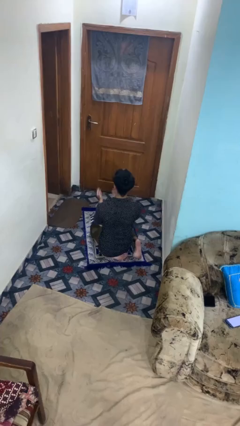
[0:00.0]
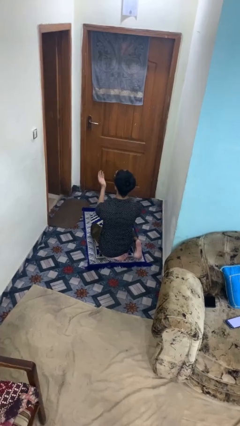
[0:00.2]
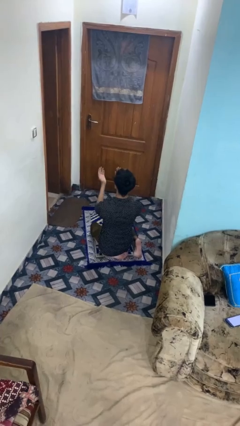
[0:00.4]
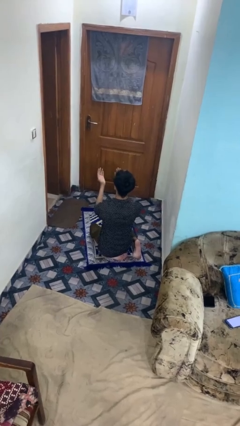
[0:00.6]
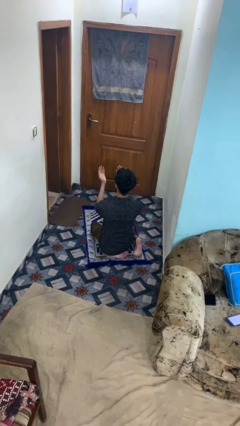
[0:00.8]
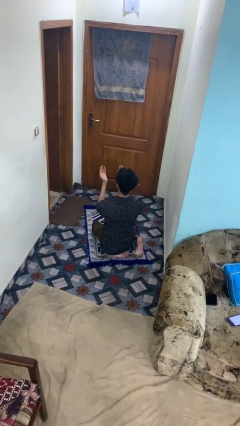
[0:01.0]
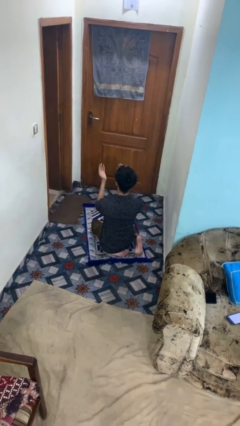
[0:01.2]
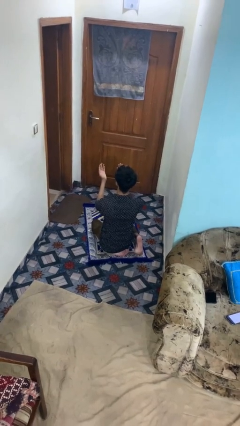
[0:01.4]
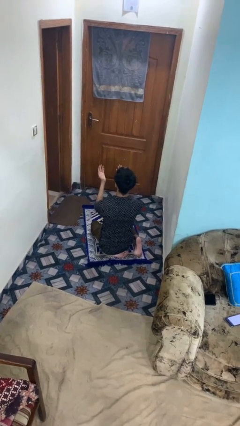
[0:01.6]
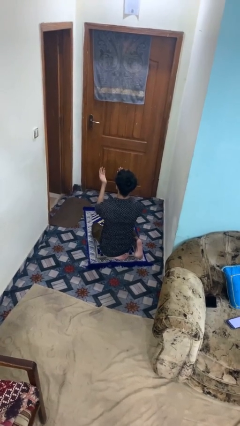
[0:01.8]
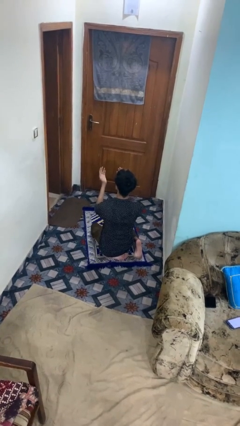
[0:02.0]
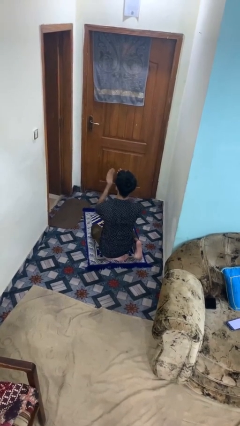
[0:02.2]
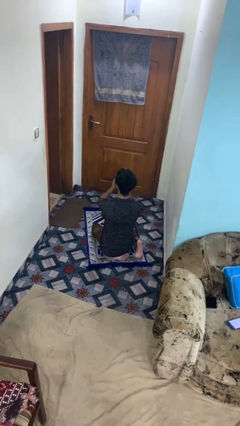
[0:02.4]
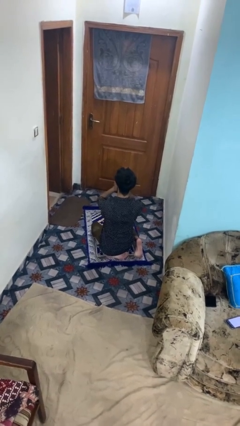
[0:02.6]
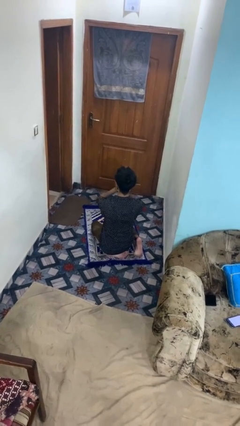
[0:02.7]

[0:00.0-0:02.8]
person prays

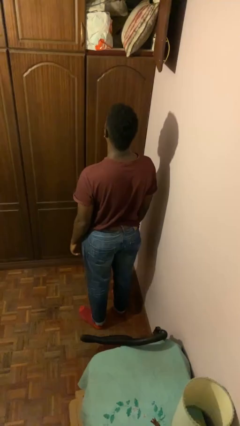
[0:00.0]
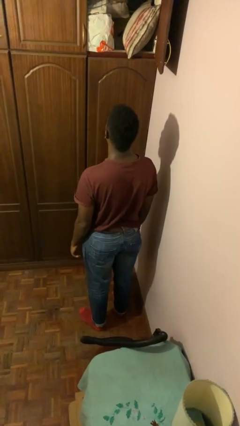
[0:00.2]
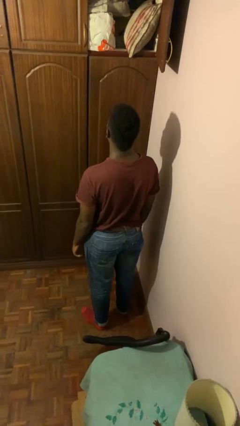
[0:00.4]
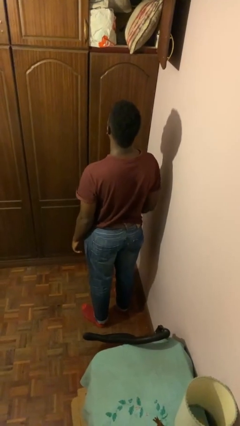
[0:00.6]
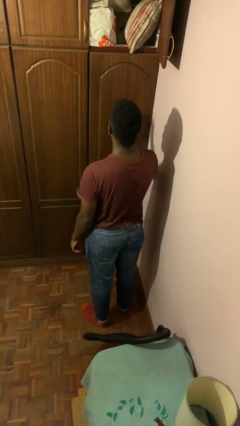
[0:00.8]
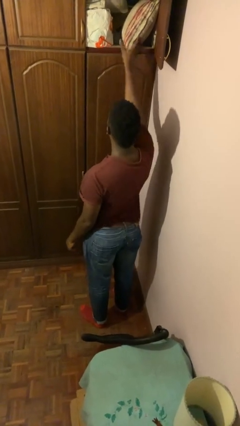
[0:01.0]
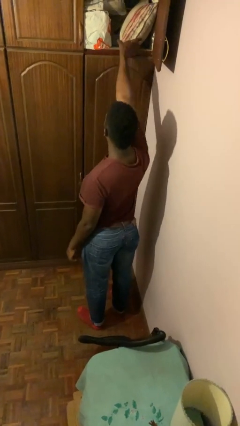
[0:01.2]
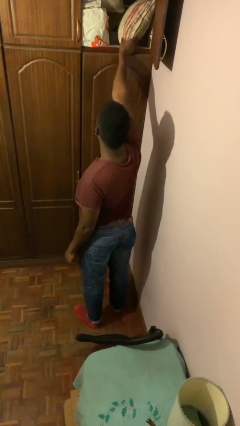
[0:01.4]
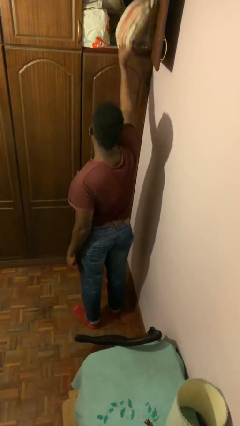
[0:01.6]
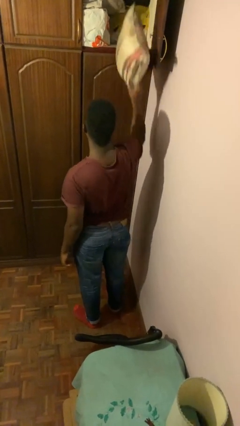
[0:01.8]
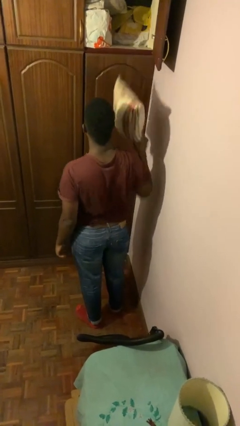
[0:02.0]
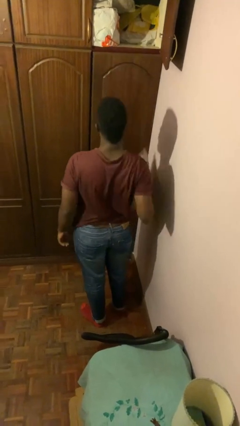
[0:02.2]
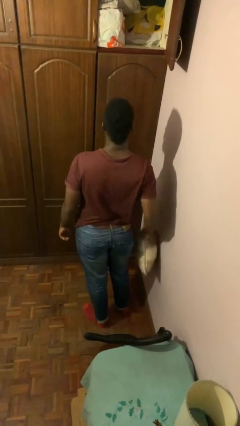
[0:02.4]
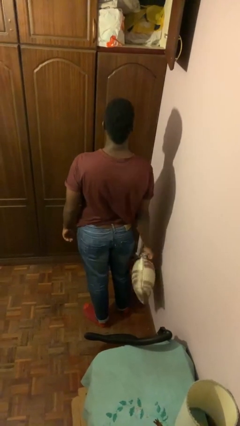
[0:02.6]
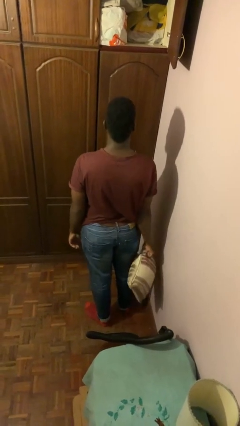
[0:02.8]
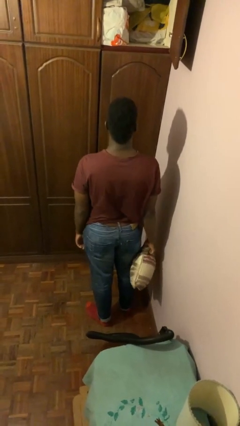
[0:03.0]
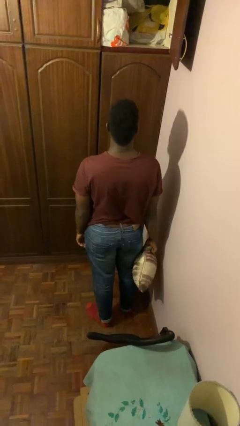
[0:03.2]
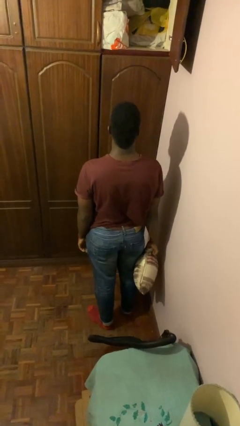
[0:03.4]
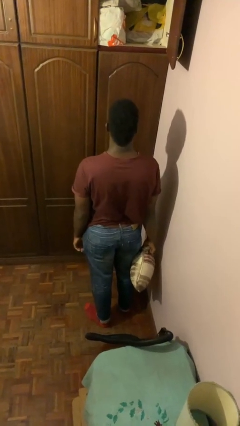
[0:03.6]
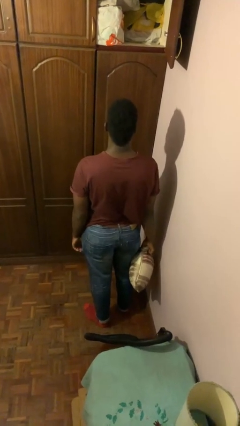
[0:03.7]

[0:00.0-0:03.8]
person picks up object from shelf

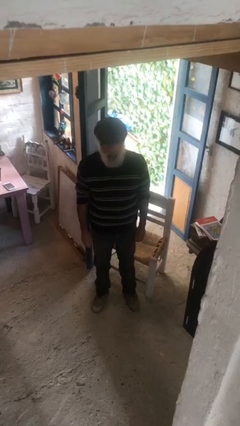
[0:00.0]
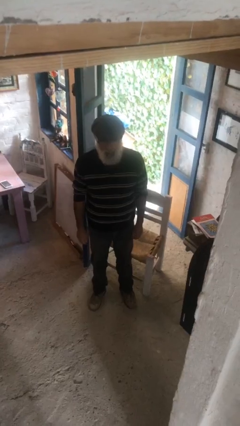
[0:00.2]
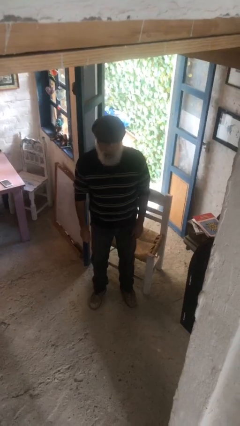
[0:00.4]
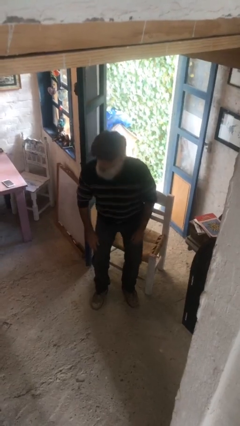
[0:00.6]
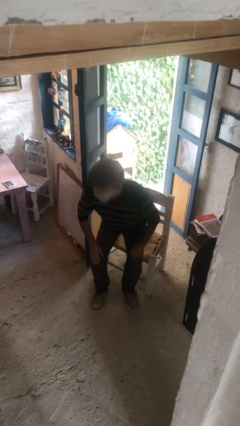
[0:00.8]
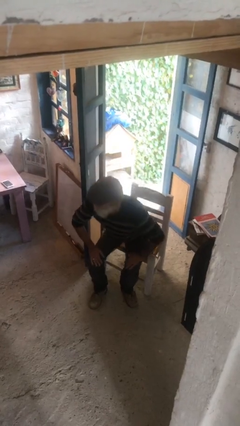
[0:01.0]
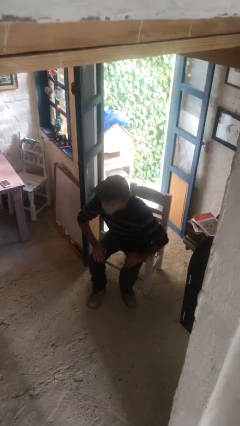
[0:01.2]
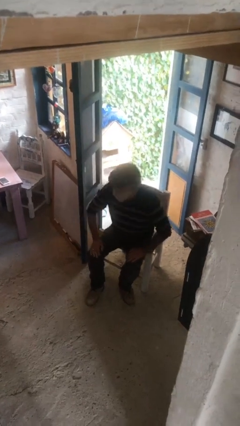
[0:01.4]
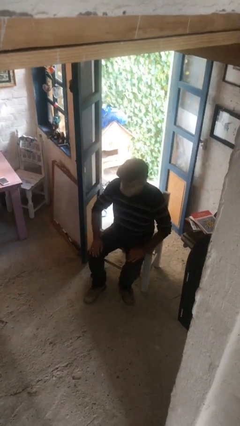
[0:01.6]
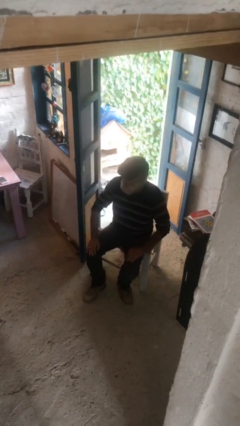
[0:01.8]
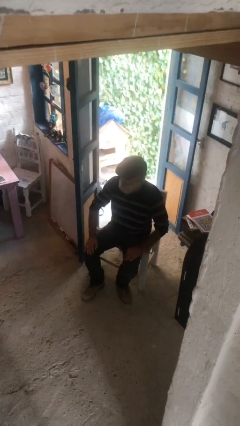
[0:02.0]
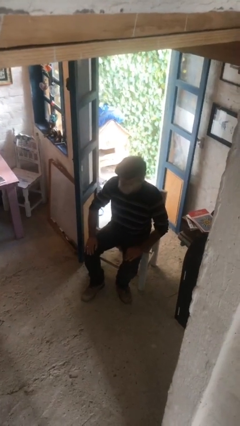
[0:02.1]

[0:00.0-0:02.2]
person sits down

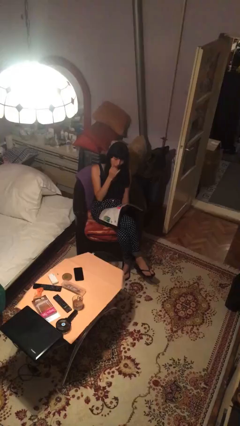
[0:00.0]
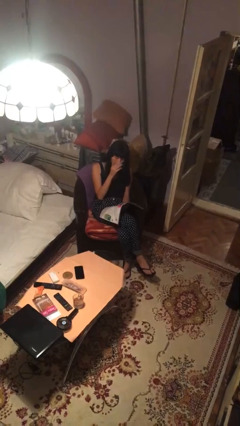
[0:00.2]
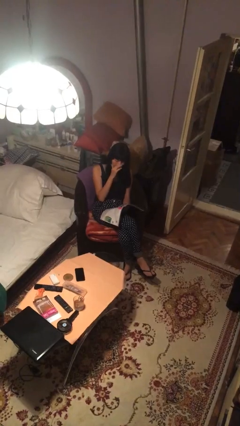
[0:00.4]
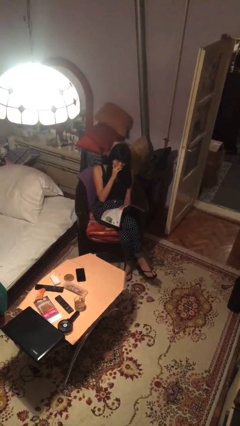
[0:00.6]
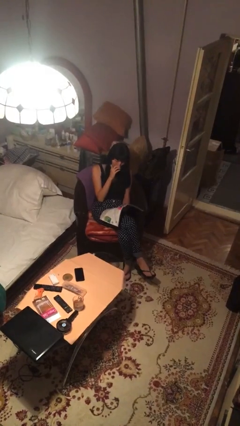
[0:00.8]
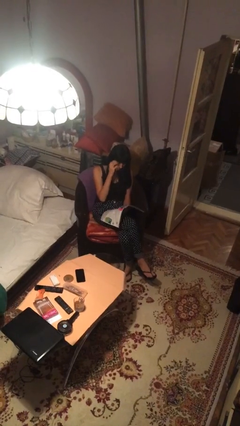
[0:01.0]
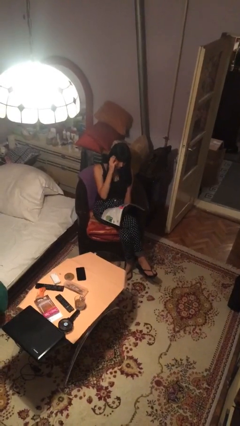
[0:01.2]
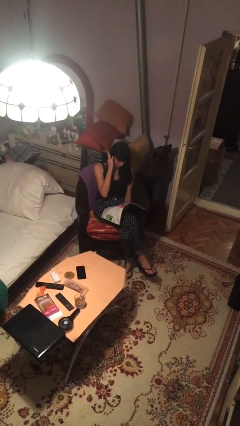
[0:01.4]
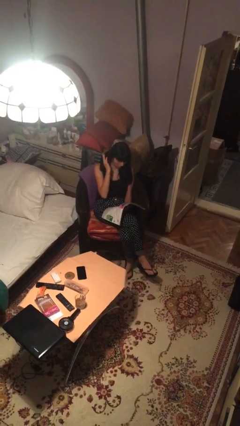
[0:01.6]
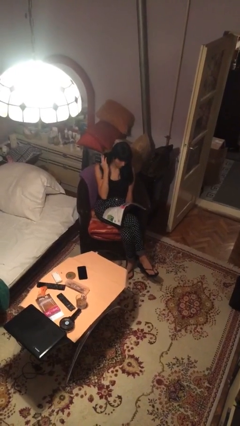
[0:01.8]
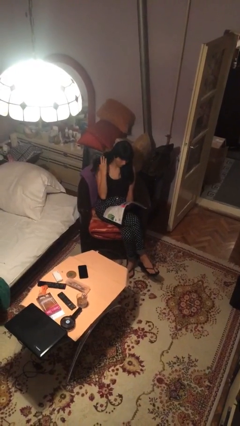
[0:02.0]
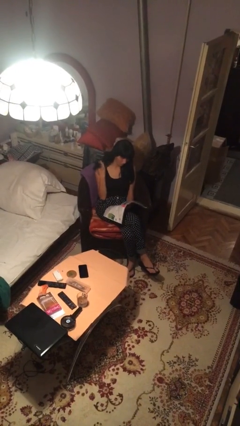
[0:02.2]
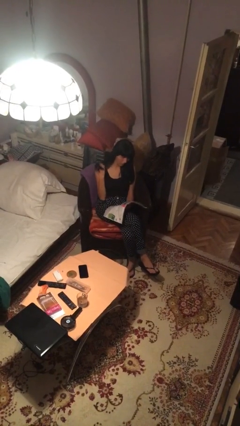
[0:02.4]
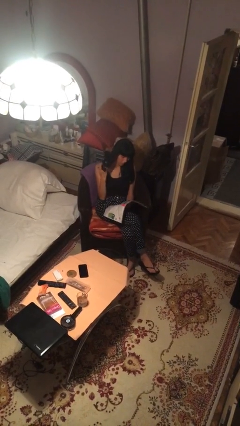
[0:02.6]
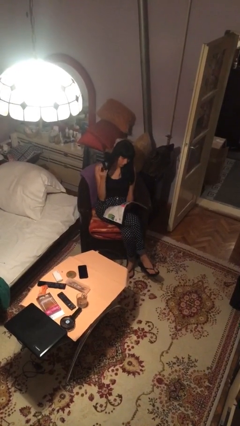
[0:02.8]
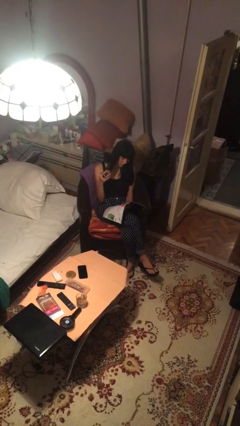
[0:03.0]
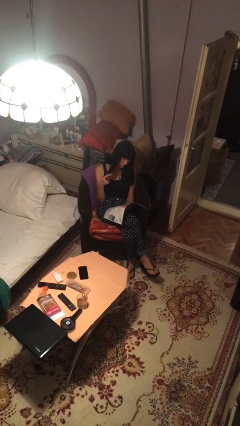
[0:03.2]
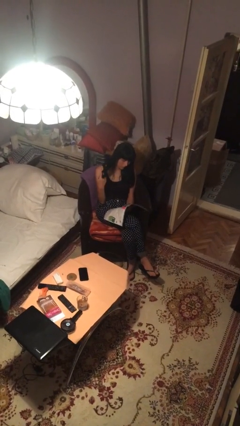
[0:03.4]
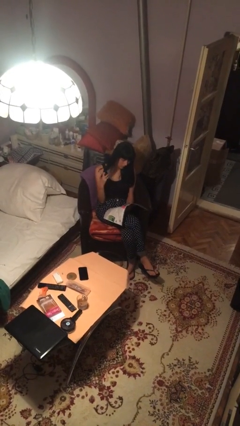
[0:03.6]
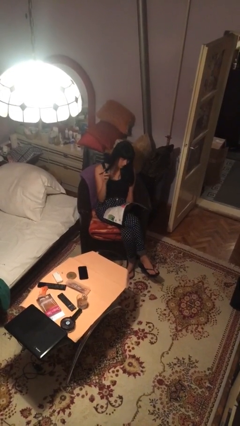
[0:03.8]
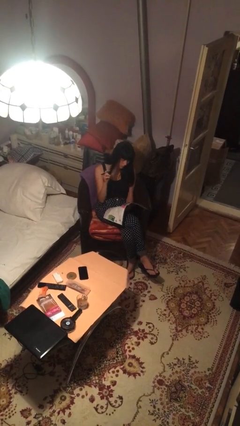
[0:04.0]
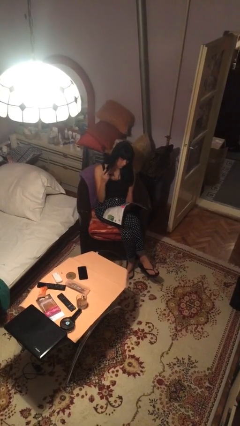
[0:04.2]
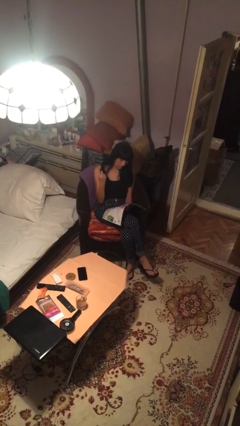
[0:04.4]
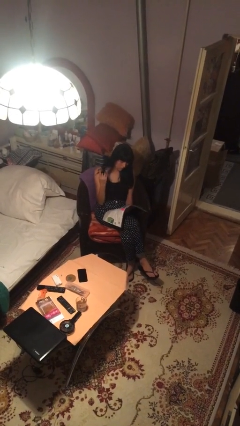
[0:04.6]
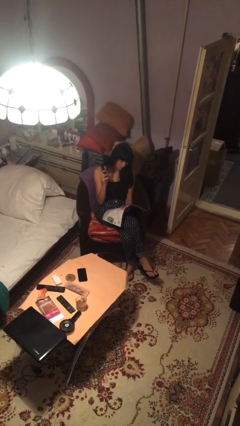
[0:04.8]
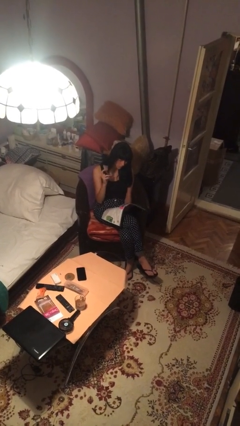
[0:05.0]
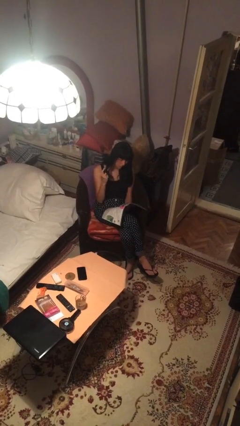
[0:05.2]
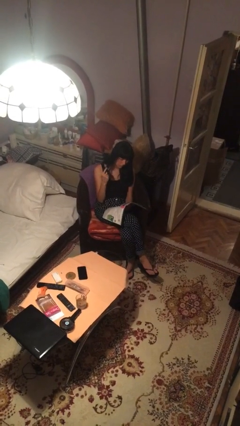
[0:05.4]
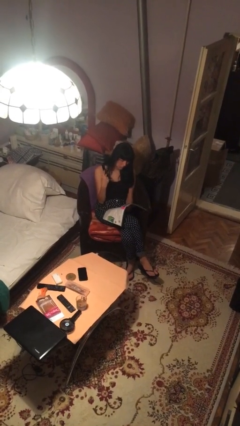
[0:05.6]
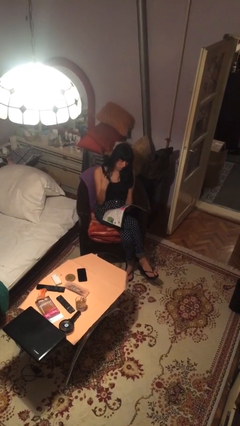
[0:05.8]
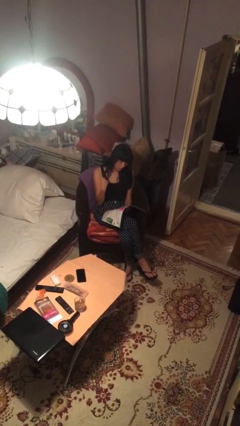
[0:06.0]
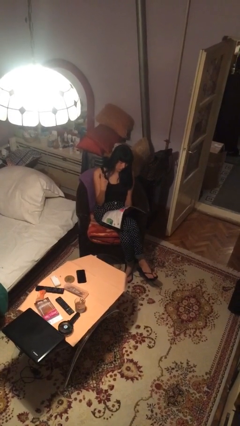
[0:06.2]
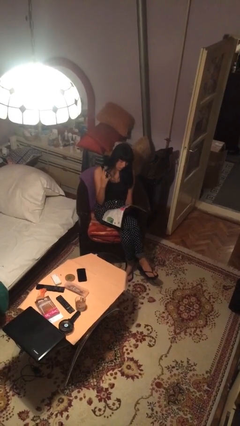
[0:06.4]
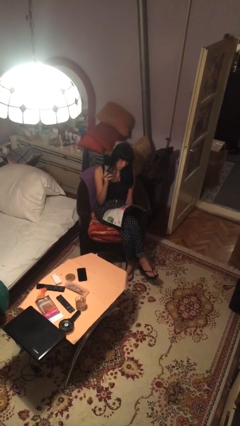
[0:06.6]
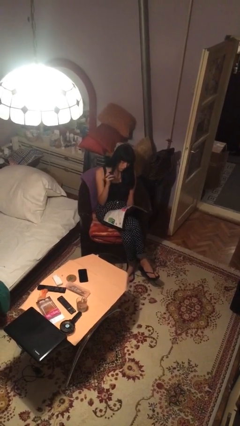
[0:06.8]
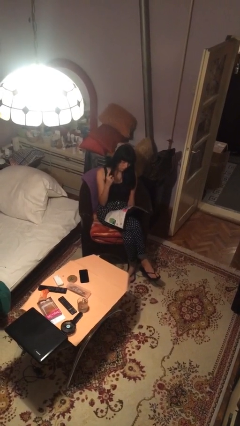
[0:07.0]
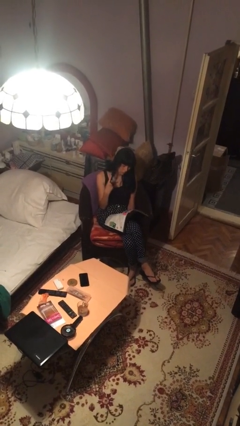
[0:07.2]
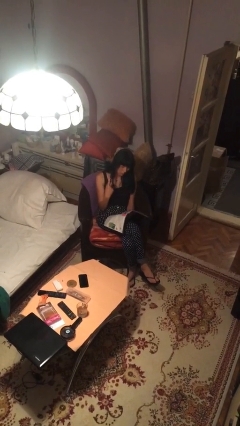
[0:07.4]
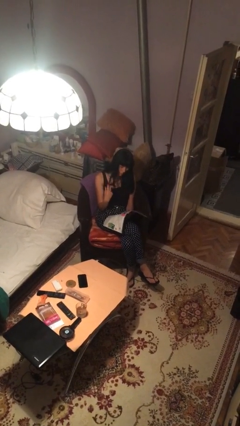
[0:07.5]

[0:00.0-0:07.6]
person reads document

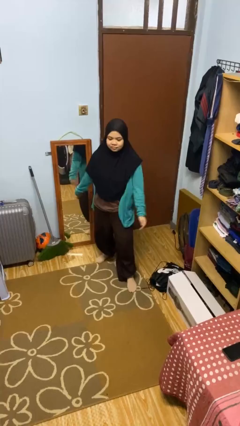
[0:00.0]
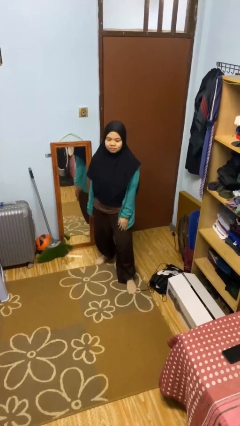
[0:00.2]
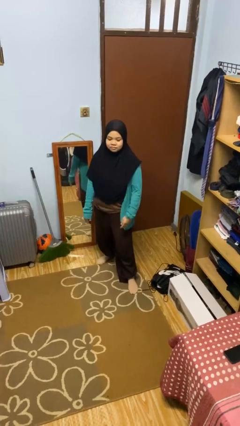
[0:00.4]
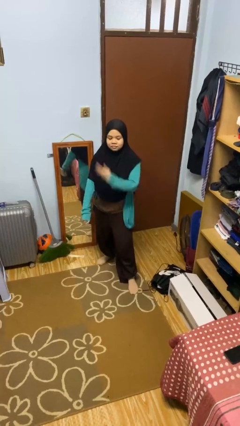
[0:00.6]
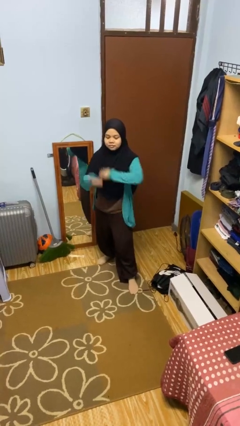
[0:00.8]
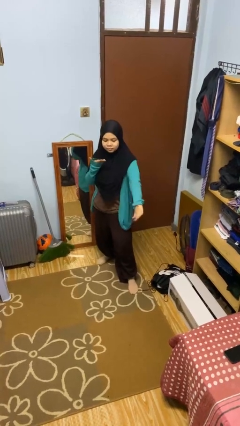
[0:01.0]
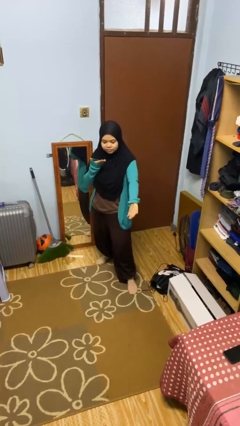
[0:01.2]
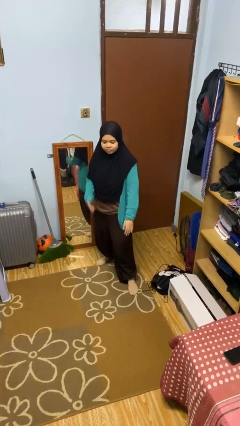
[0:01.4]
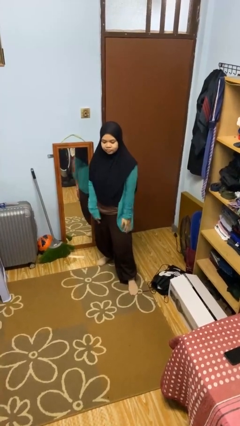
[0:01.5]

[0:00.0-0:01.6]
person karate chop
